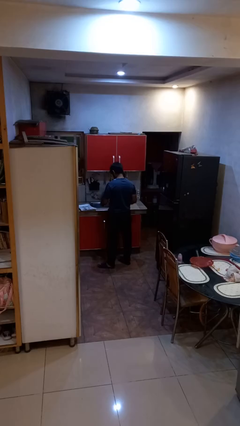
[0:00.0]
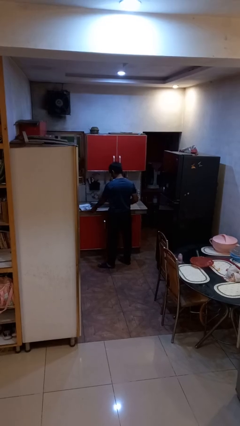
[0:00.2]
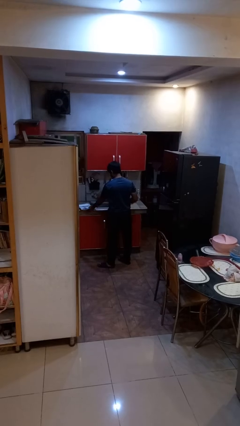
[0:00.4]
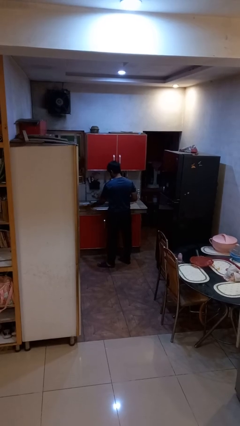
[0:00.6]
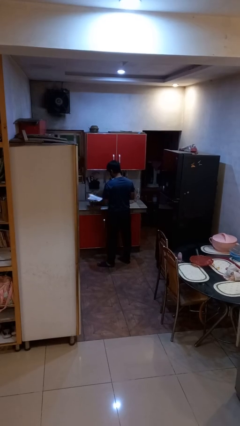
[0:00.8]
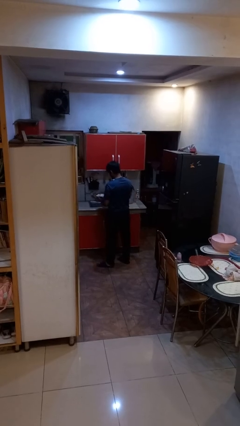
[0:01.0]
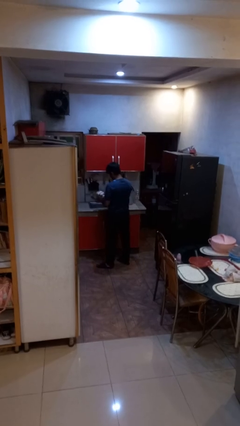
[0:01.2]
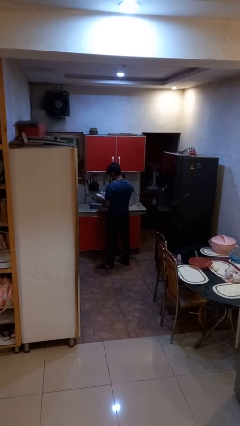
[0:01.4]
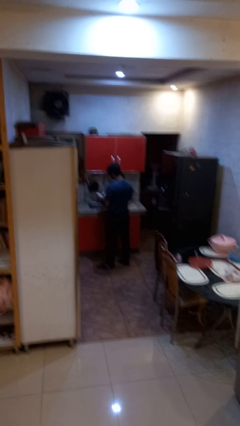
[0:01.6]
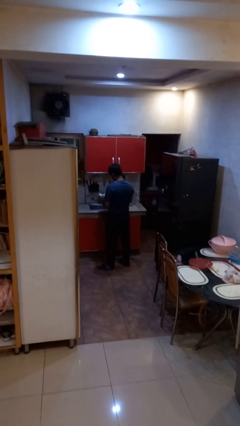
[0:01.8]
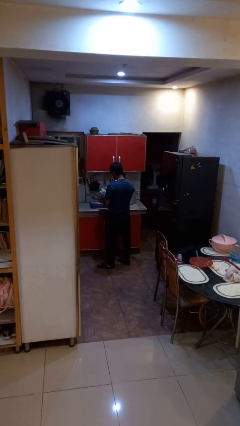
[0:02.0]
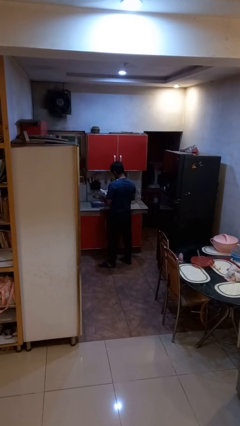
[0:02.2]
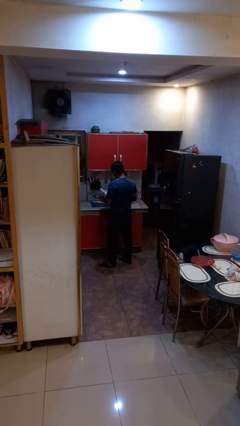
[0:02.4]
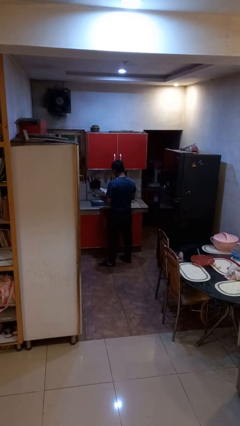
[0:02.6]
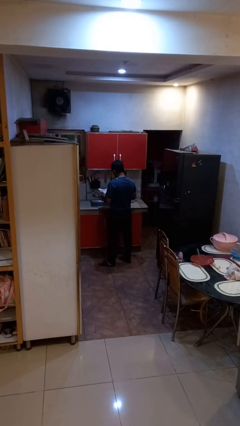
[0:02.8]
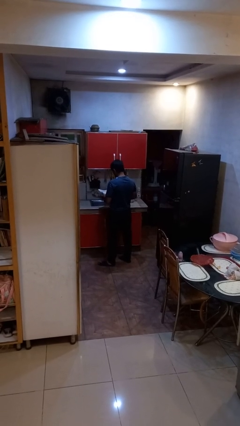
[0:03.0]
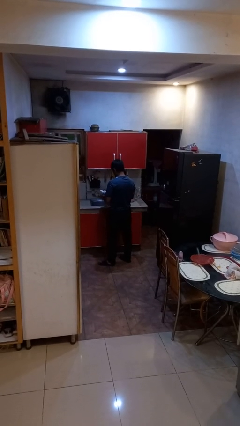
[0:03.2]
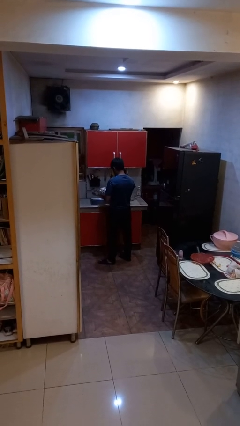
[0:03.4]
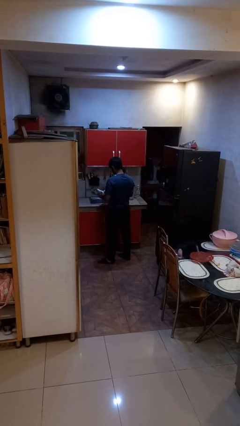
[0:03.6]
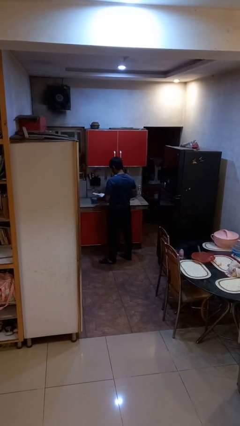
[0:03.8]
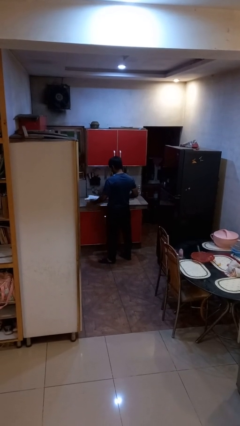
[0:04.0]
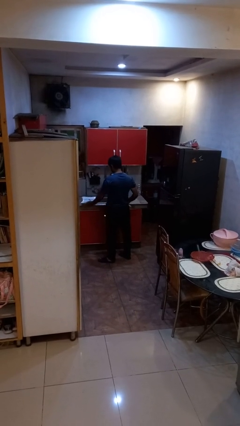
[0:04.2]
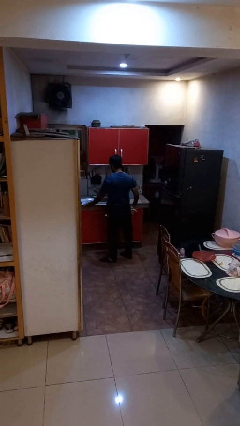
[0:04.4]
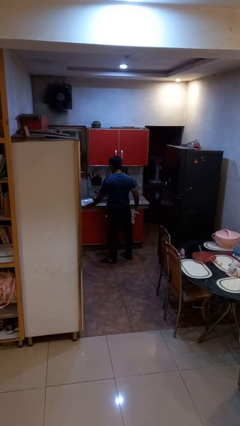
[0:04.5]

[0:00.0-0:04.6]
person dries dish

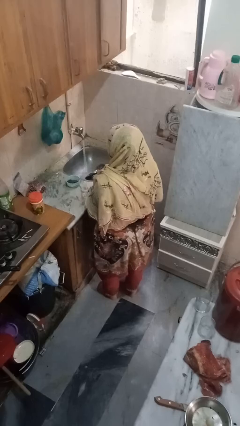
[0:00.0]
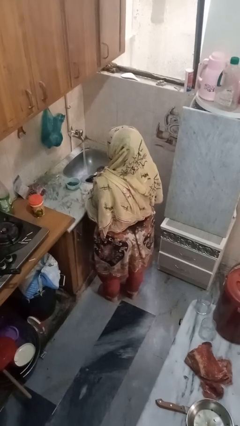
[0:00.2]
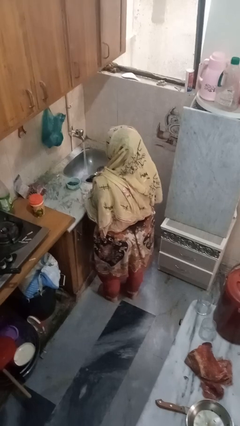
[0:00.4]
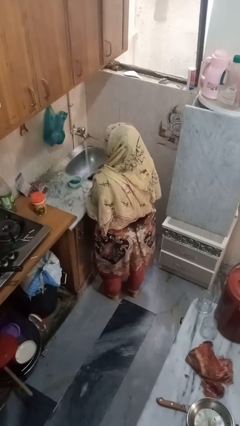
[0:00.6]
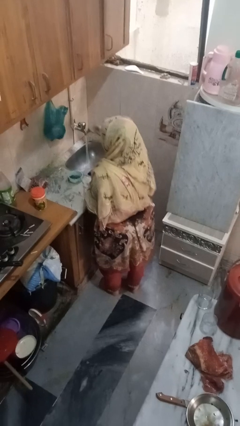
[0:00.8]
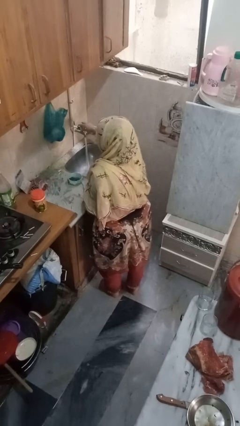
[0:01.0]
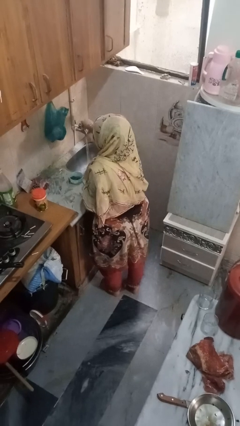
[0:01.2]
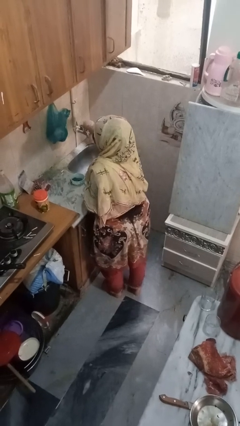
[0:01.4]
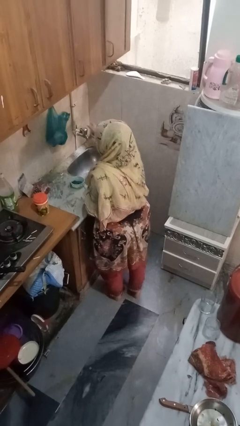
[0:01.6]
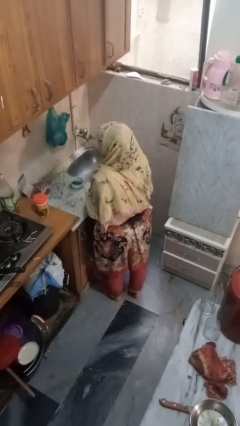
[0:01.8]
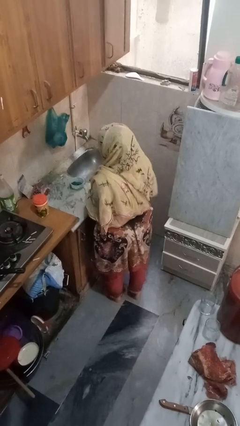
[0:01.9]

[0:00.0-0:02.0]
person turns off faucet

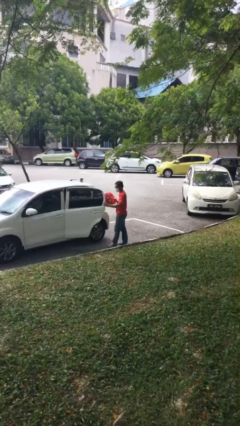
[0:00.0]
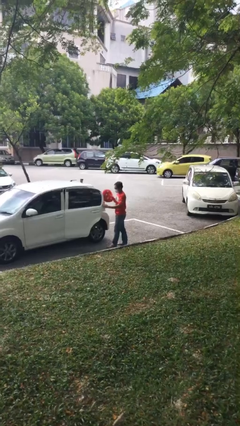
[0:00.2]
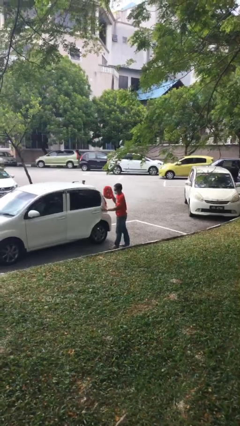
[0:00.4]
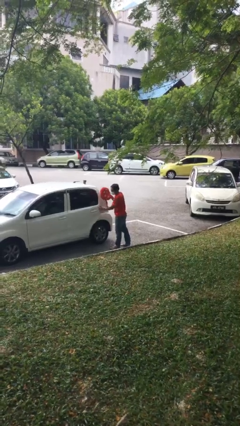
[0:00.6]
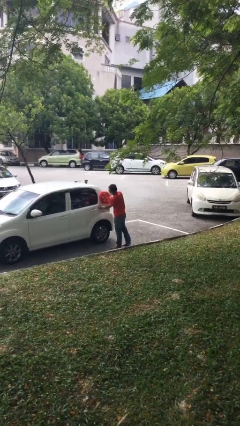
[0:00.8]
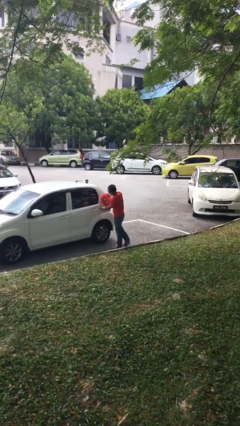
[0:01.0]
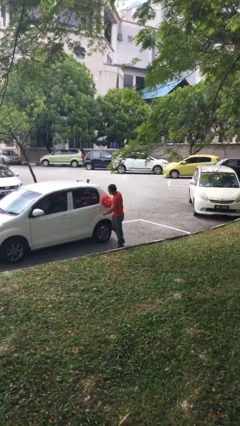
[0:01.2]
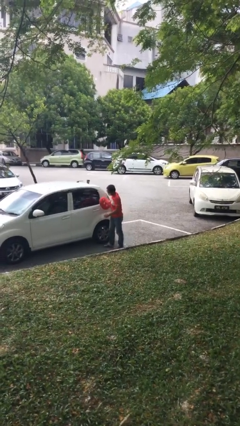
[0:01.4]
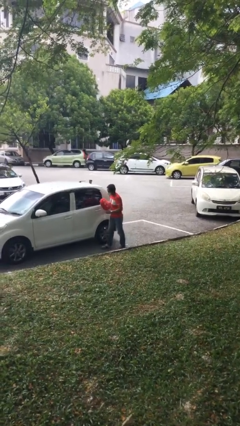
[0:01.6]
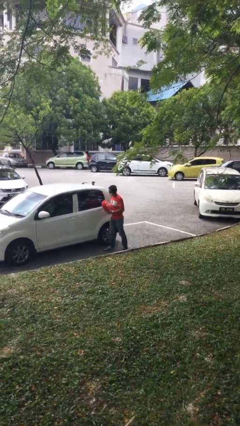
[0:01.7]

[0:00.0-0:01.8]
person closes car door

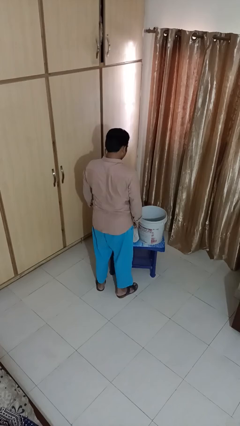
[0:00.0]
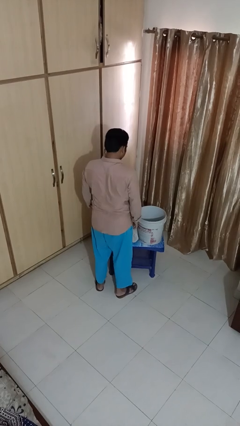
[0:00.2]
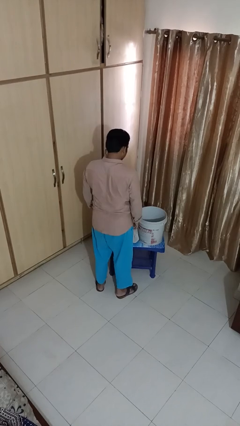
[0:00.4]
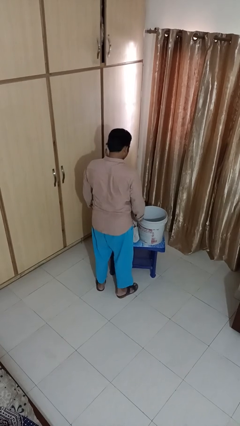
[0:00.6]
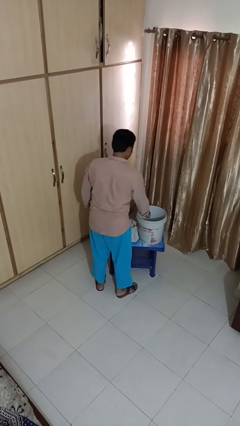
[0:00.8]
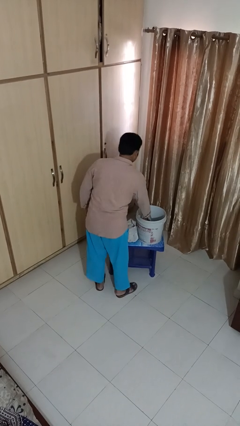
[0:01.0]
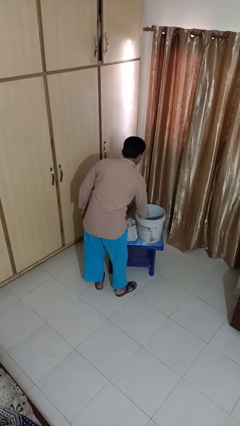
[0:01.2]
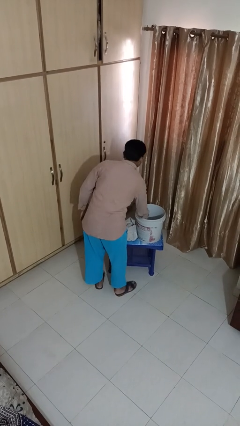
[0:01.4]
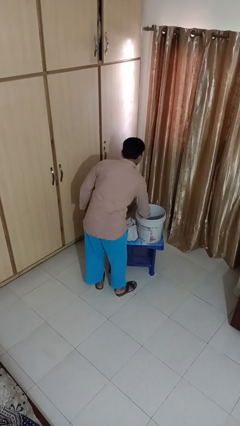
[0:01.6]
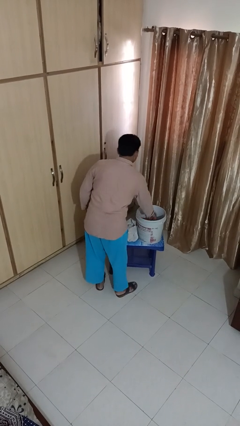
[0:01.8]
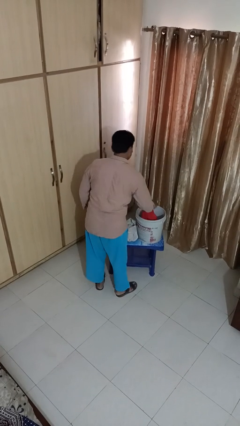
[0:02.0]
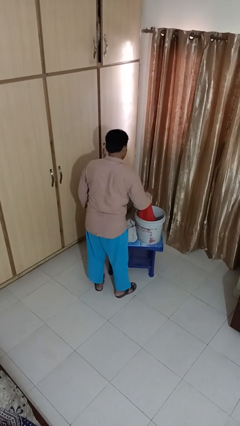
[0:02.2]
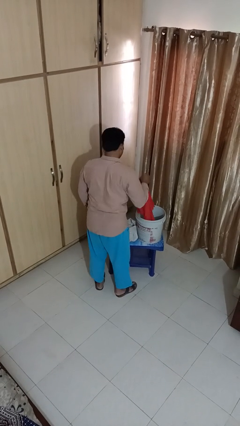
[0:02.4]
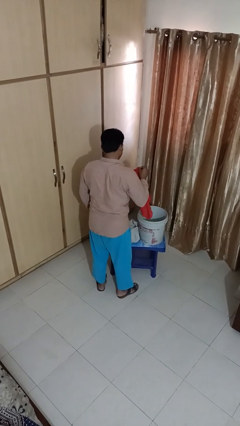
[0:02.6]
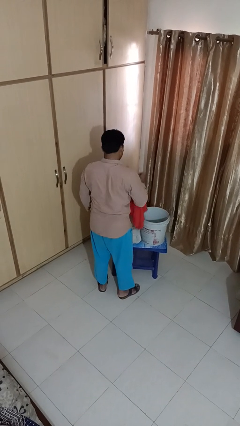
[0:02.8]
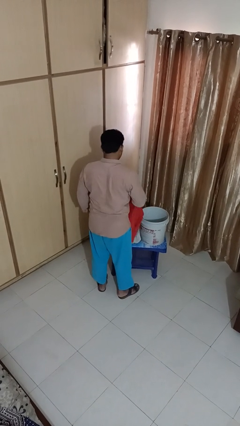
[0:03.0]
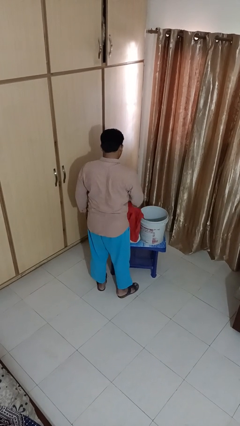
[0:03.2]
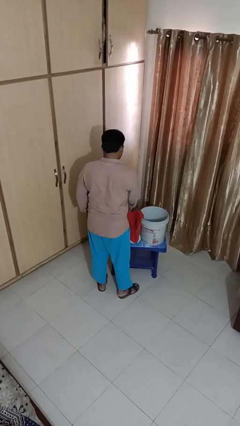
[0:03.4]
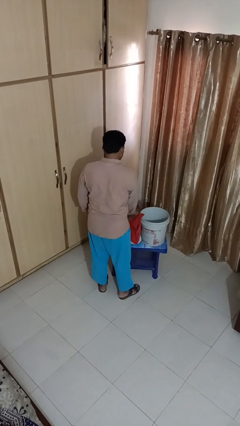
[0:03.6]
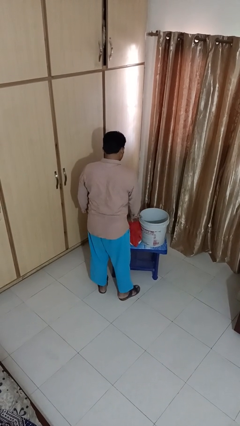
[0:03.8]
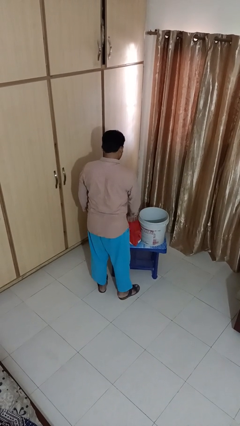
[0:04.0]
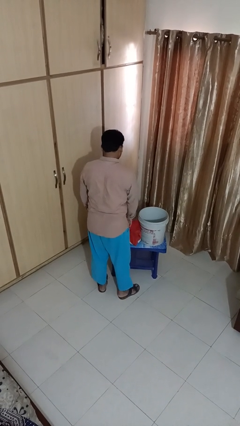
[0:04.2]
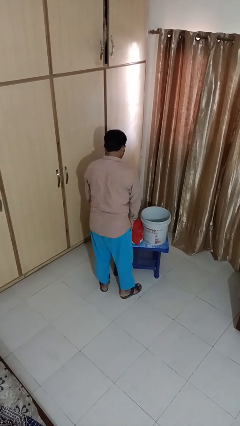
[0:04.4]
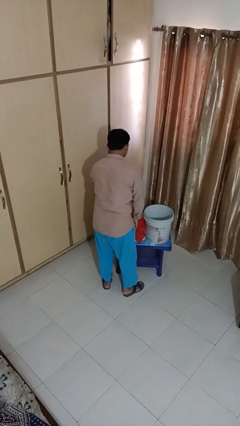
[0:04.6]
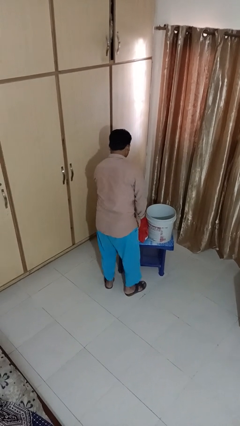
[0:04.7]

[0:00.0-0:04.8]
person takes object from basket

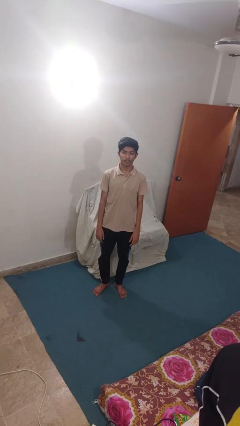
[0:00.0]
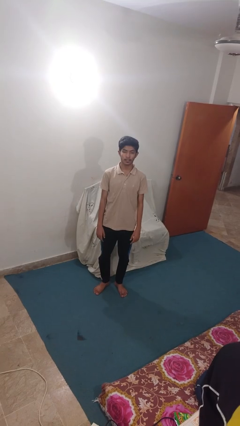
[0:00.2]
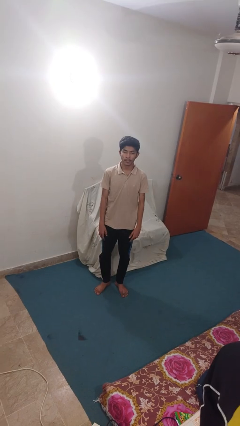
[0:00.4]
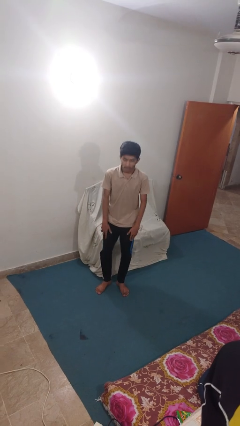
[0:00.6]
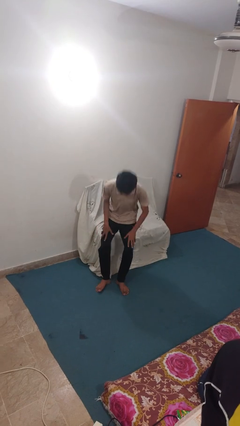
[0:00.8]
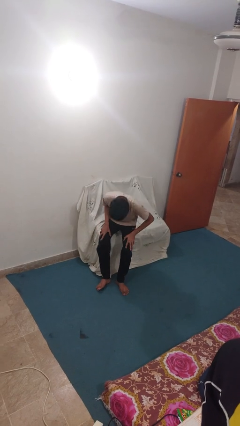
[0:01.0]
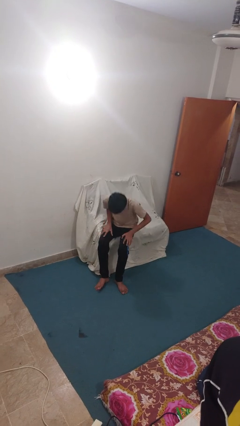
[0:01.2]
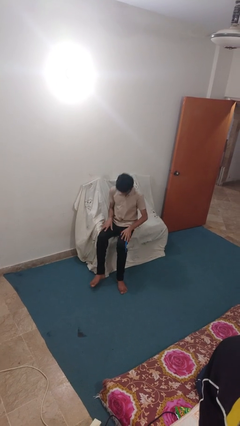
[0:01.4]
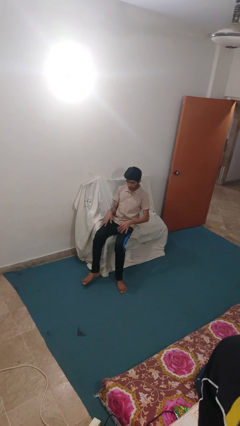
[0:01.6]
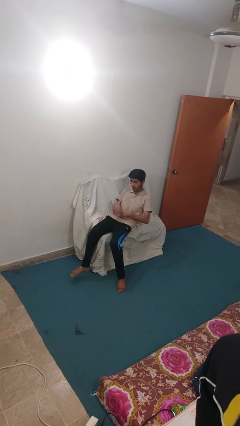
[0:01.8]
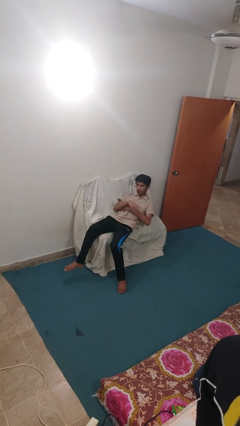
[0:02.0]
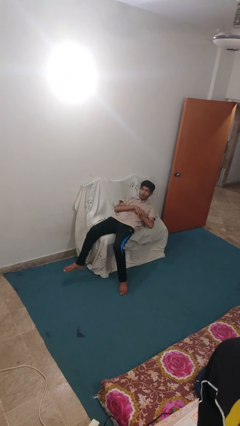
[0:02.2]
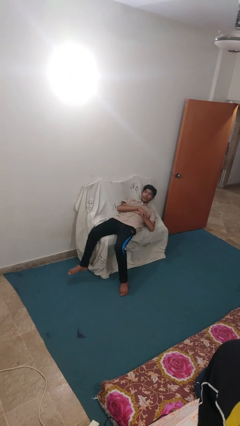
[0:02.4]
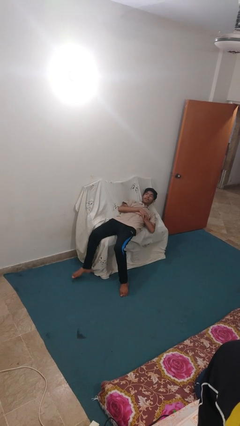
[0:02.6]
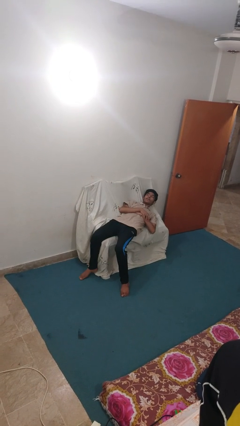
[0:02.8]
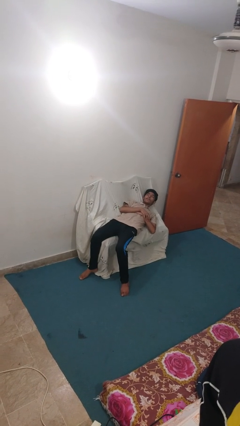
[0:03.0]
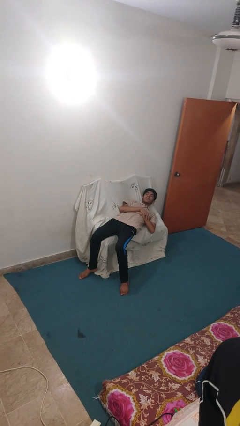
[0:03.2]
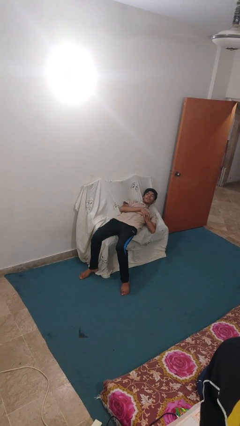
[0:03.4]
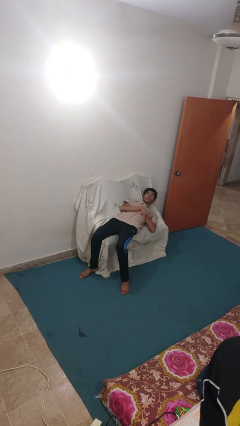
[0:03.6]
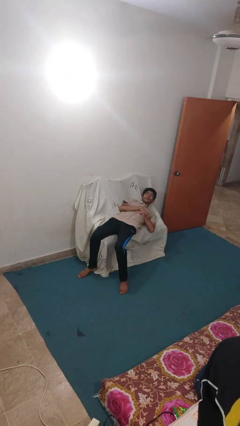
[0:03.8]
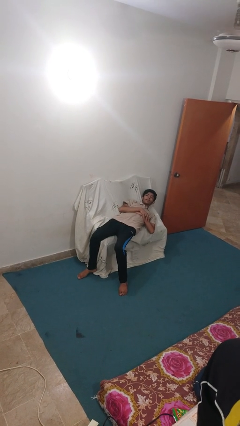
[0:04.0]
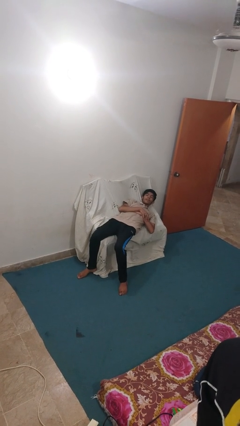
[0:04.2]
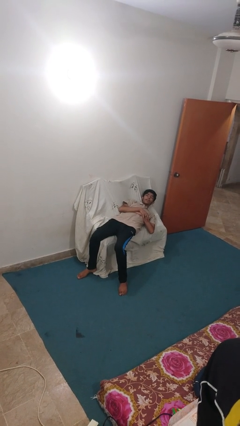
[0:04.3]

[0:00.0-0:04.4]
person lies down on couch
